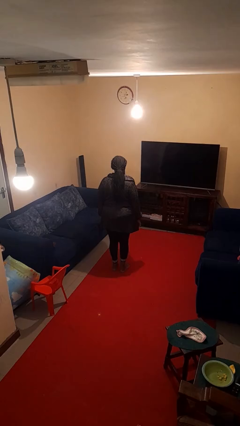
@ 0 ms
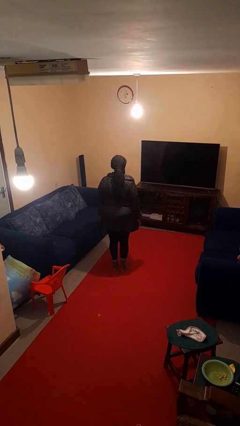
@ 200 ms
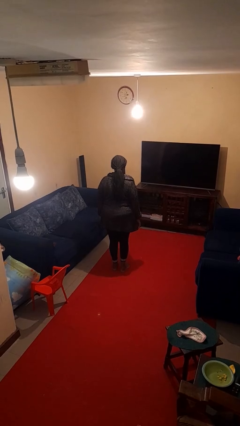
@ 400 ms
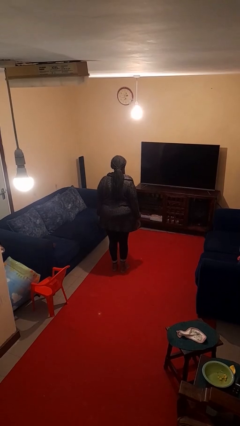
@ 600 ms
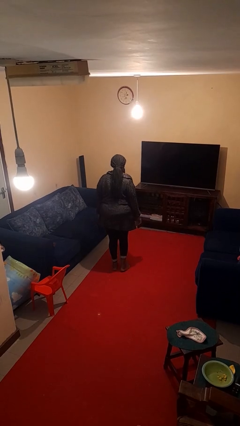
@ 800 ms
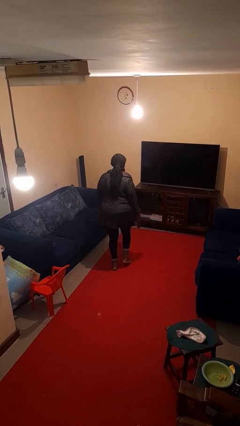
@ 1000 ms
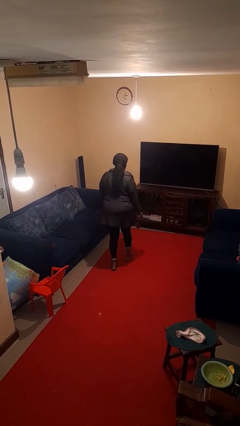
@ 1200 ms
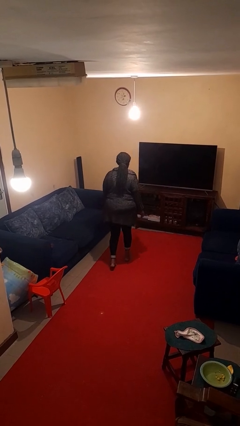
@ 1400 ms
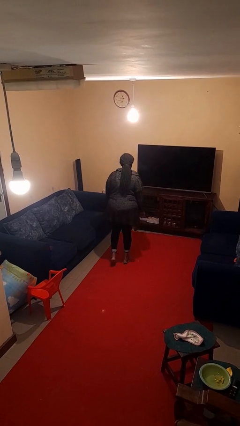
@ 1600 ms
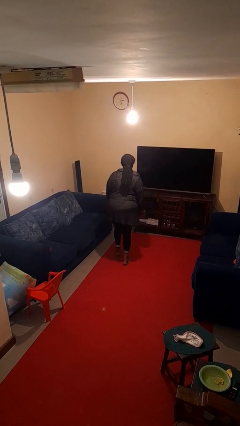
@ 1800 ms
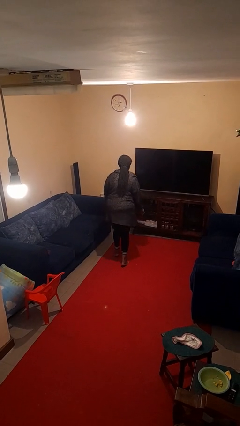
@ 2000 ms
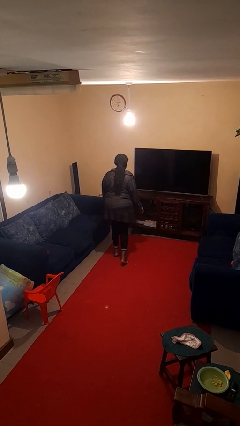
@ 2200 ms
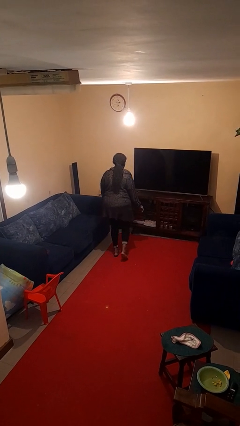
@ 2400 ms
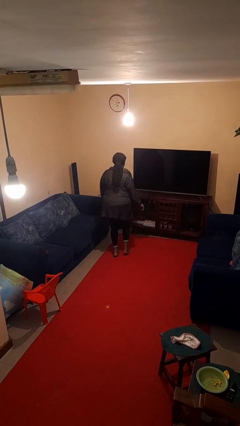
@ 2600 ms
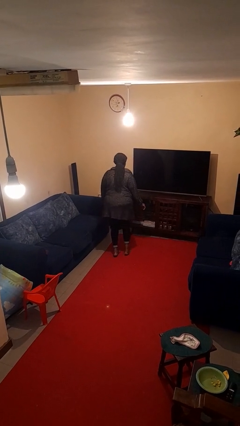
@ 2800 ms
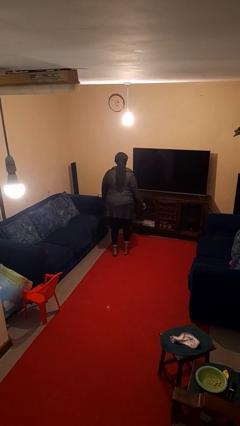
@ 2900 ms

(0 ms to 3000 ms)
person walks tiptoe

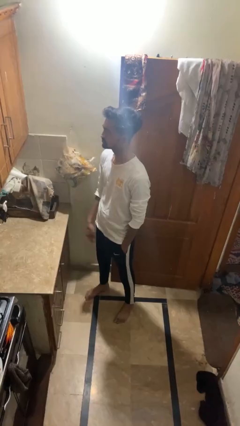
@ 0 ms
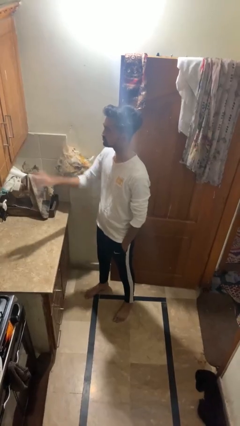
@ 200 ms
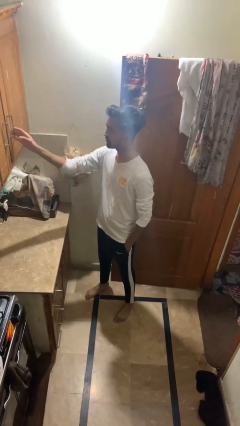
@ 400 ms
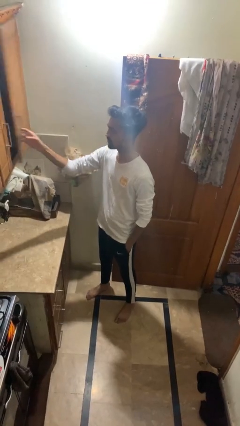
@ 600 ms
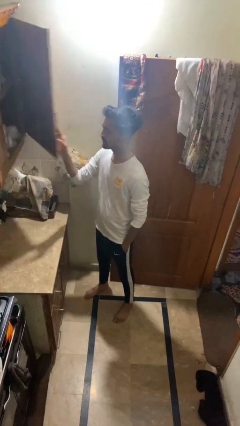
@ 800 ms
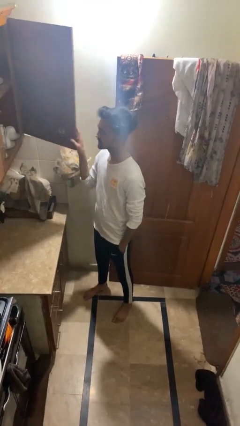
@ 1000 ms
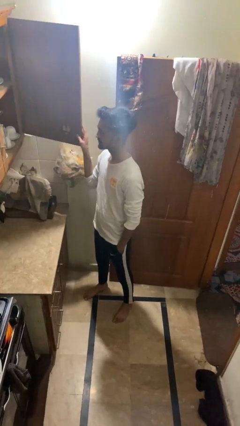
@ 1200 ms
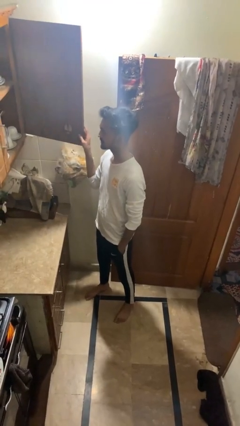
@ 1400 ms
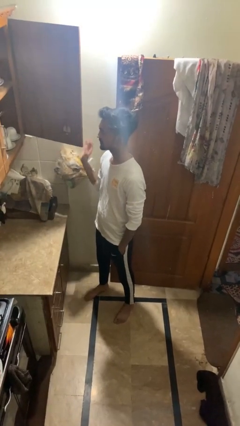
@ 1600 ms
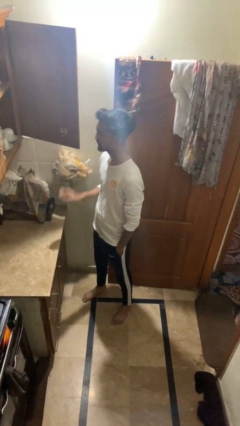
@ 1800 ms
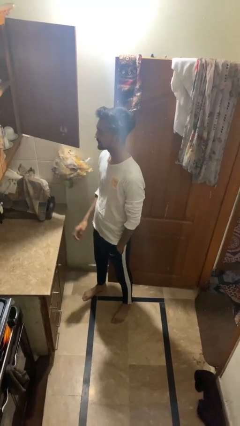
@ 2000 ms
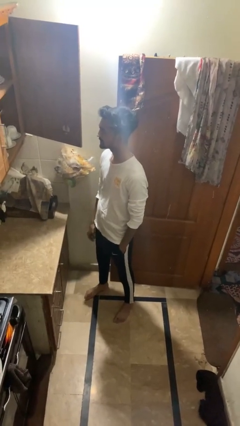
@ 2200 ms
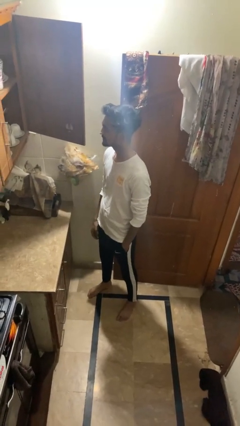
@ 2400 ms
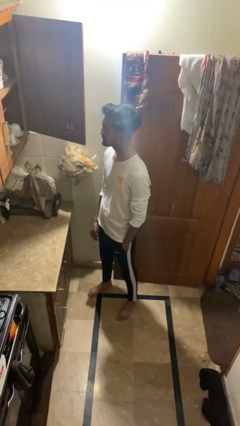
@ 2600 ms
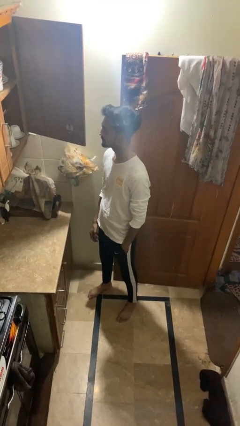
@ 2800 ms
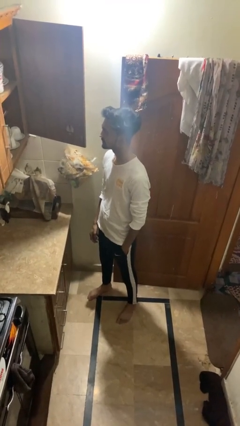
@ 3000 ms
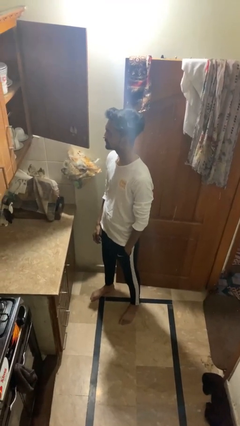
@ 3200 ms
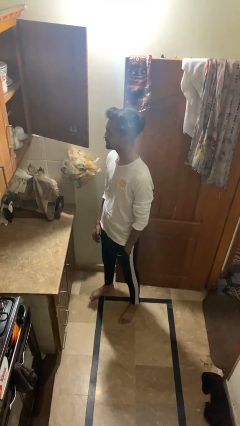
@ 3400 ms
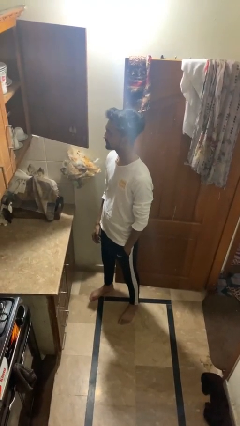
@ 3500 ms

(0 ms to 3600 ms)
person opens cabinet

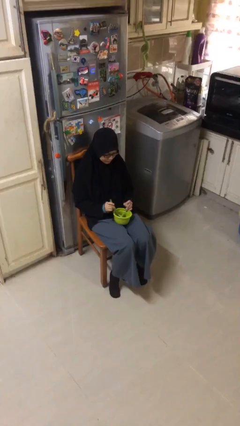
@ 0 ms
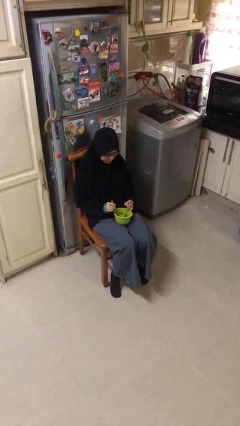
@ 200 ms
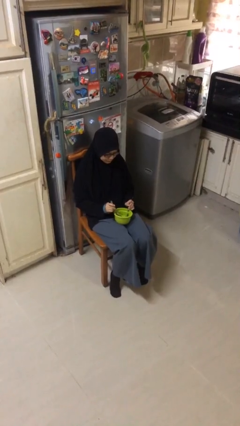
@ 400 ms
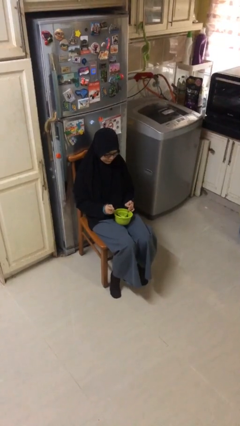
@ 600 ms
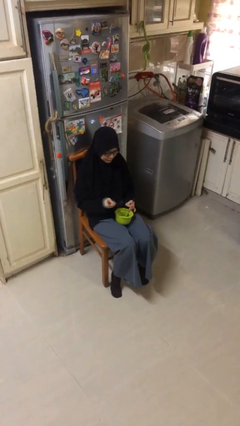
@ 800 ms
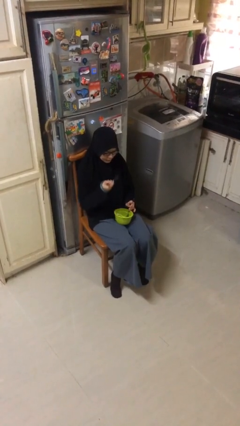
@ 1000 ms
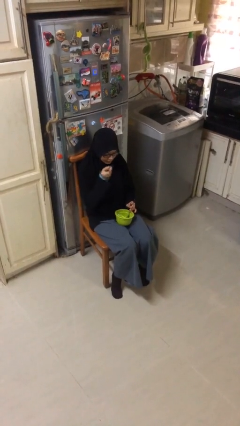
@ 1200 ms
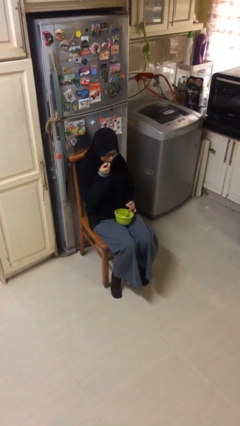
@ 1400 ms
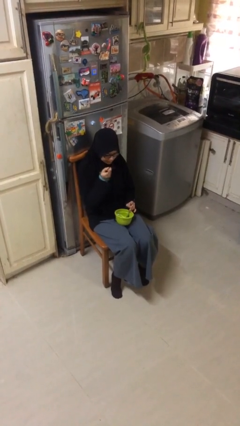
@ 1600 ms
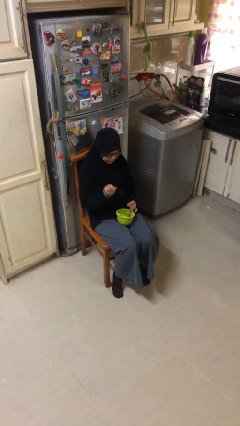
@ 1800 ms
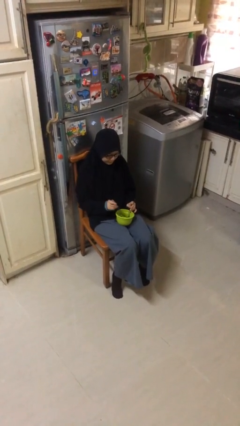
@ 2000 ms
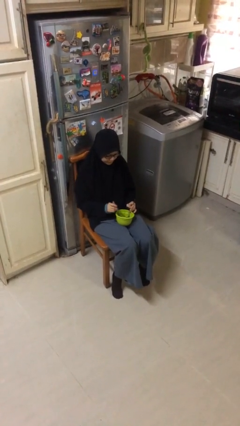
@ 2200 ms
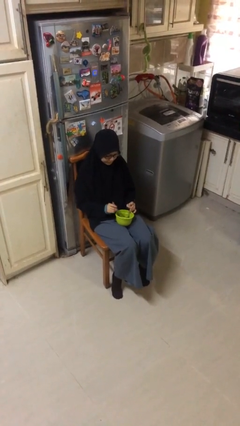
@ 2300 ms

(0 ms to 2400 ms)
person eats with utensil

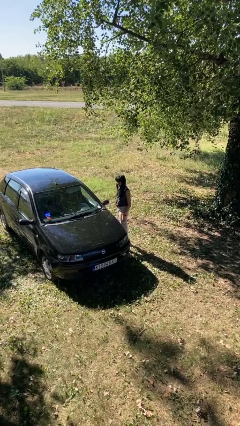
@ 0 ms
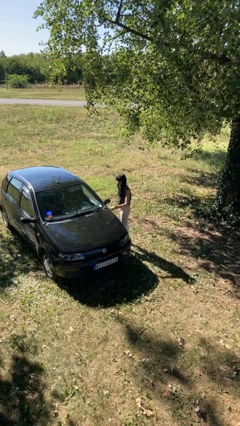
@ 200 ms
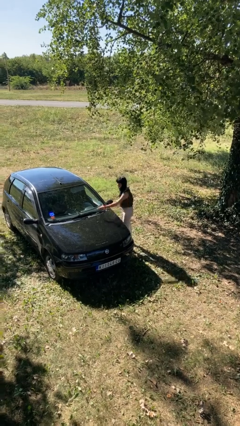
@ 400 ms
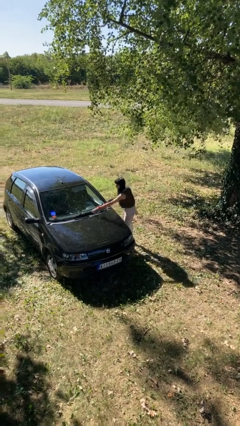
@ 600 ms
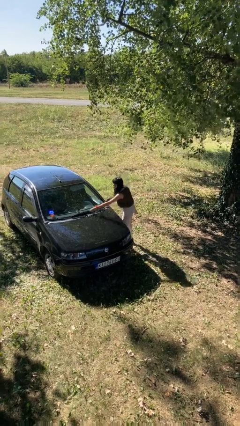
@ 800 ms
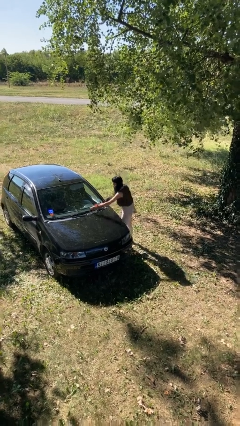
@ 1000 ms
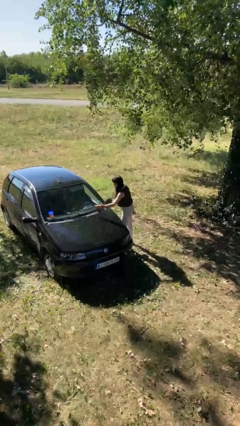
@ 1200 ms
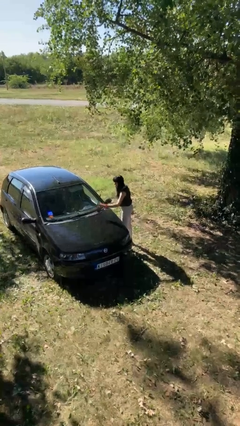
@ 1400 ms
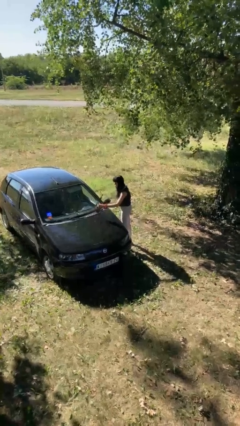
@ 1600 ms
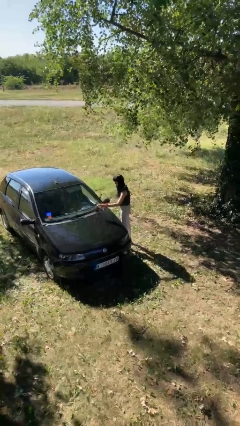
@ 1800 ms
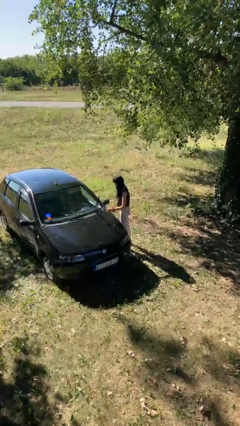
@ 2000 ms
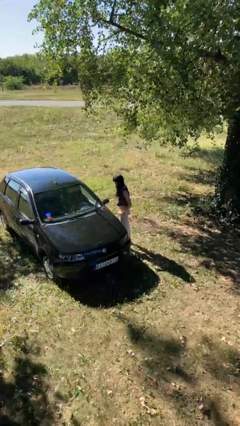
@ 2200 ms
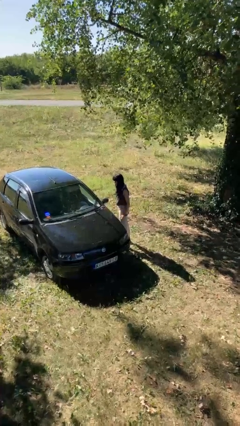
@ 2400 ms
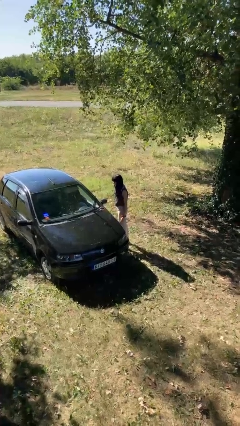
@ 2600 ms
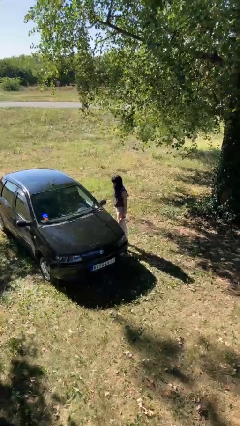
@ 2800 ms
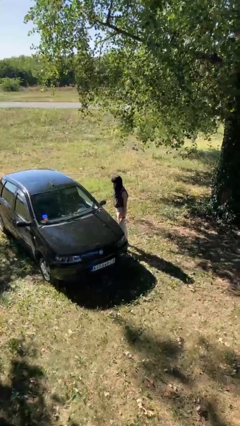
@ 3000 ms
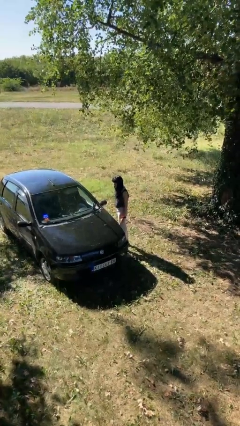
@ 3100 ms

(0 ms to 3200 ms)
person flips up car wipers

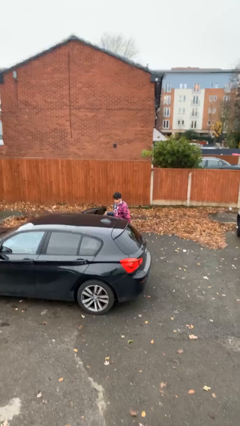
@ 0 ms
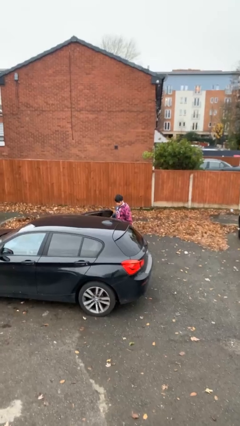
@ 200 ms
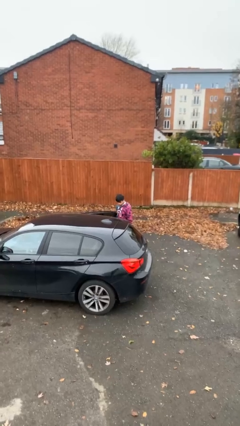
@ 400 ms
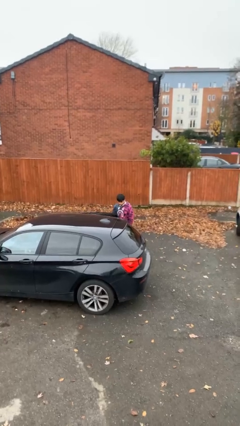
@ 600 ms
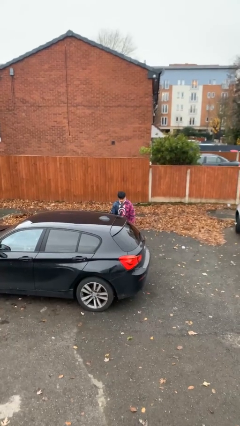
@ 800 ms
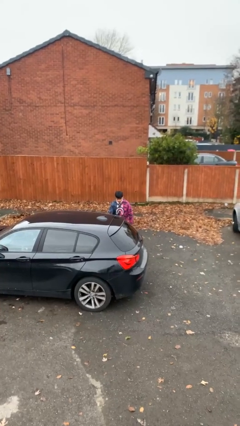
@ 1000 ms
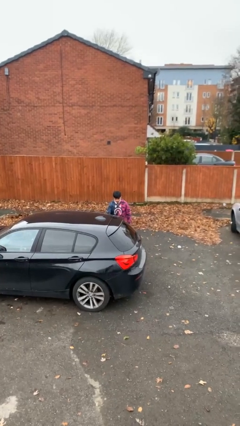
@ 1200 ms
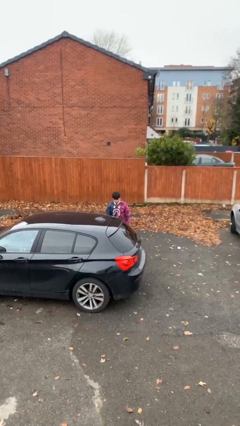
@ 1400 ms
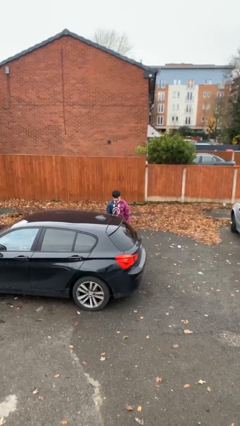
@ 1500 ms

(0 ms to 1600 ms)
person closes car door

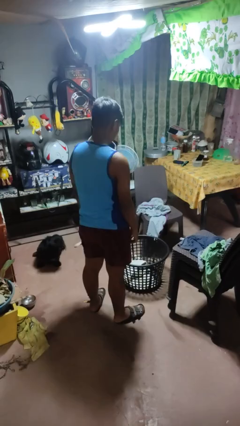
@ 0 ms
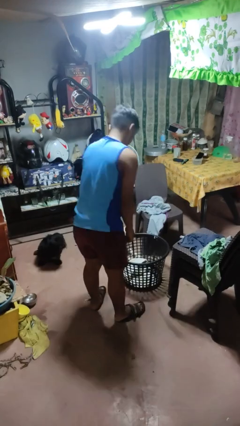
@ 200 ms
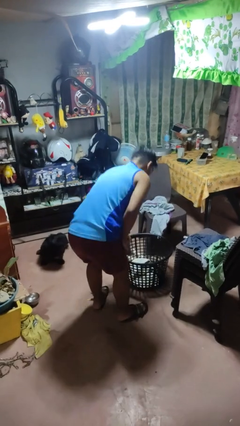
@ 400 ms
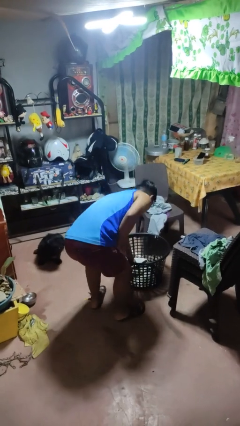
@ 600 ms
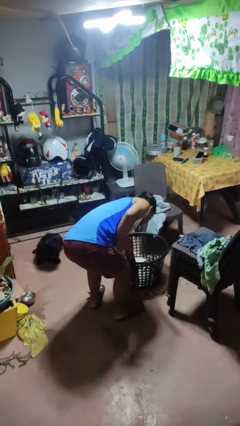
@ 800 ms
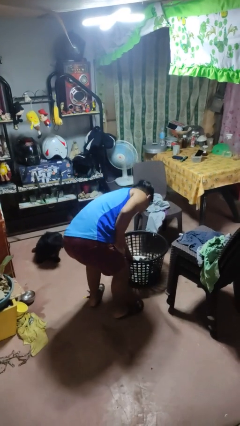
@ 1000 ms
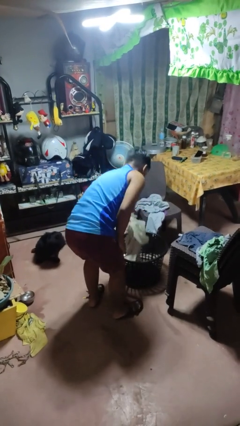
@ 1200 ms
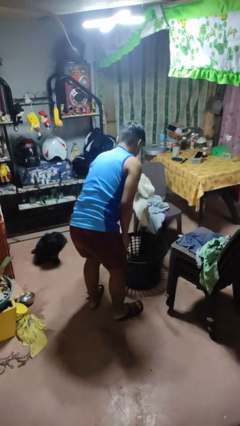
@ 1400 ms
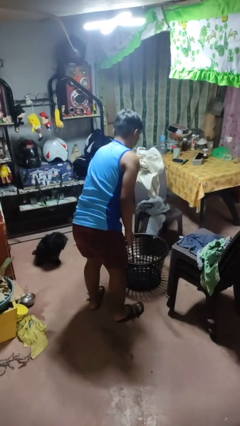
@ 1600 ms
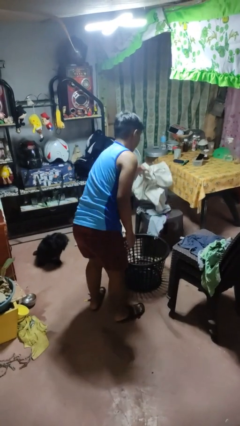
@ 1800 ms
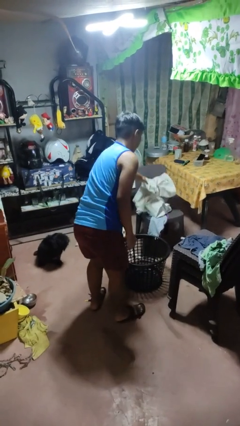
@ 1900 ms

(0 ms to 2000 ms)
person takes object from basket

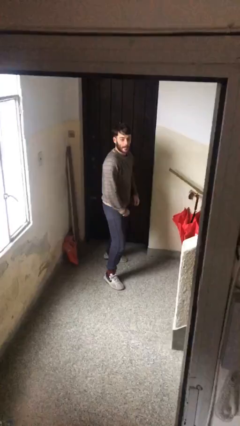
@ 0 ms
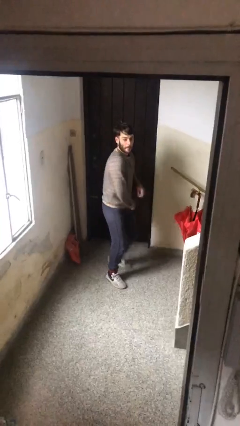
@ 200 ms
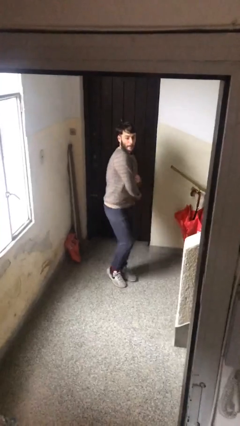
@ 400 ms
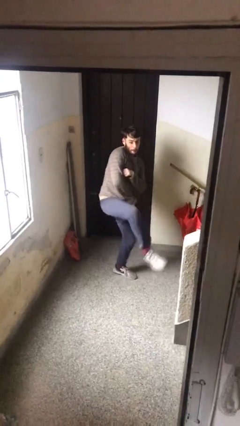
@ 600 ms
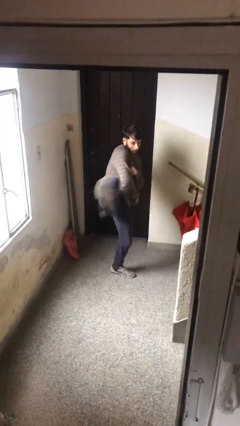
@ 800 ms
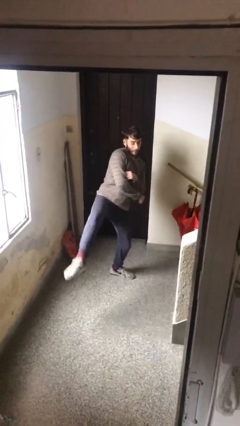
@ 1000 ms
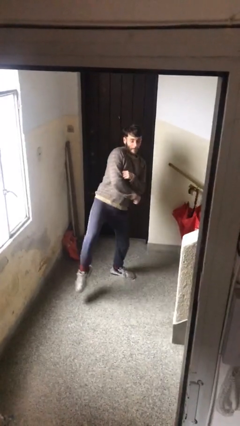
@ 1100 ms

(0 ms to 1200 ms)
person karate kicks
